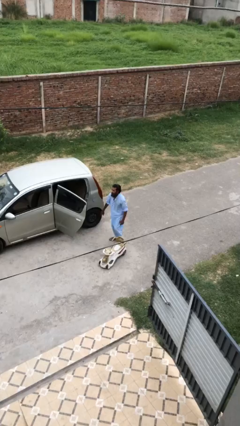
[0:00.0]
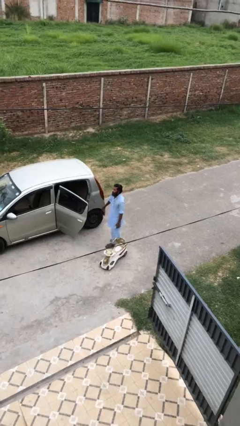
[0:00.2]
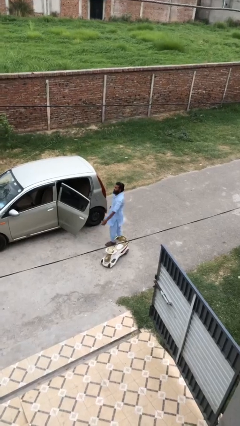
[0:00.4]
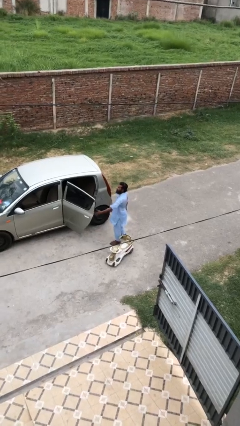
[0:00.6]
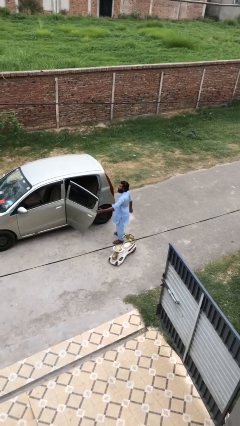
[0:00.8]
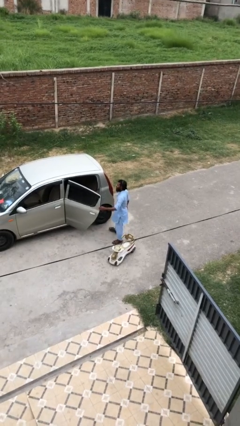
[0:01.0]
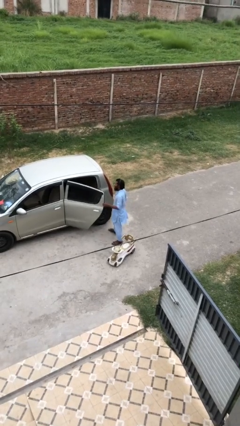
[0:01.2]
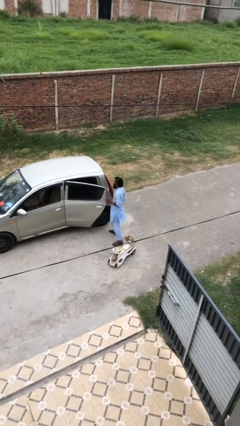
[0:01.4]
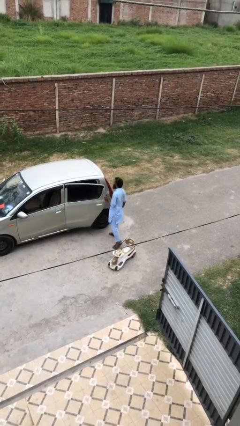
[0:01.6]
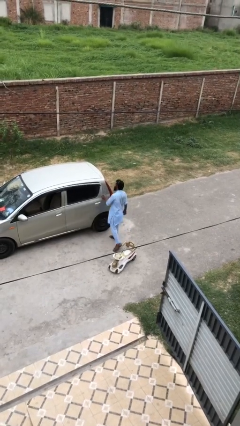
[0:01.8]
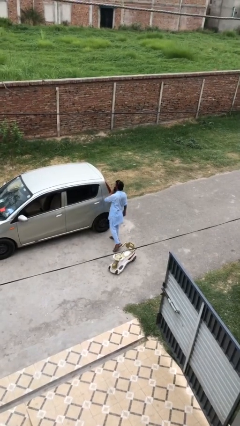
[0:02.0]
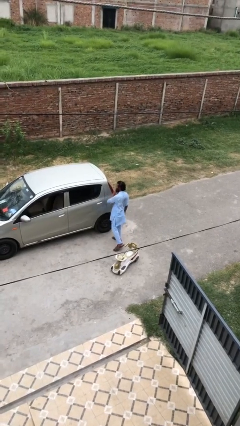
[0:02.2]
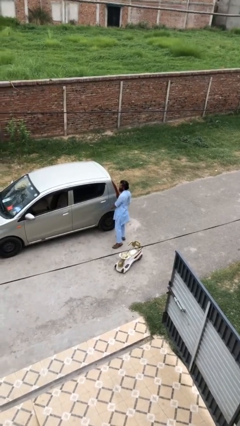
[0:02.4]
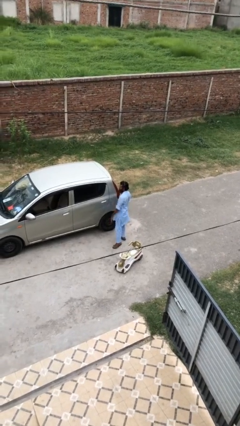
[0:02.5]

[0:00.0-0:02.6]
person closes car door

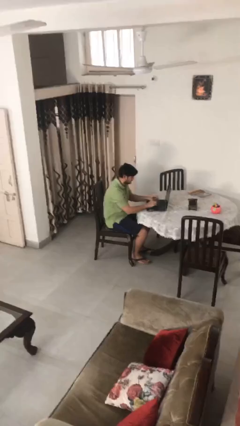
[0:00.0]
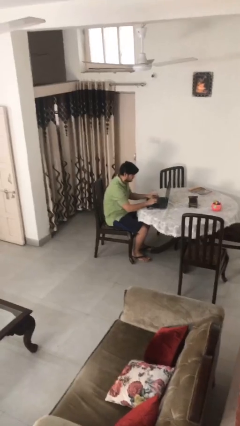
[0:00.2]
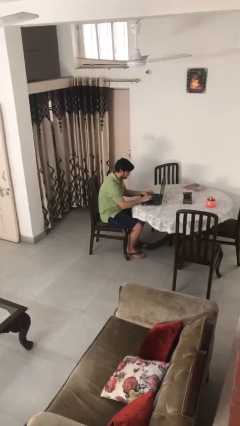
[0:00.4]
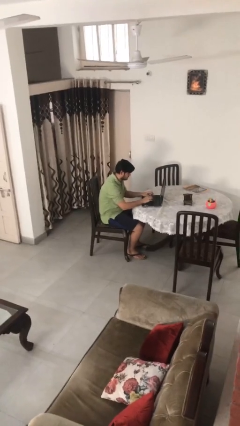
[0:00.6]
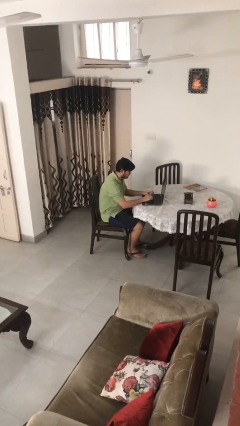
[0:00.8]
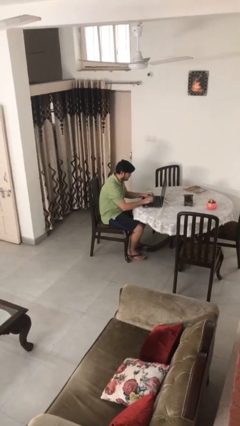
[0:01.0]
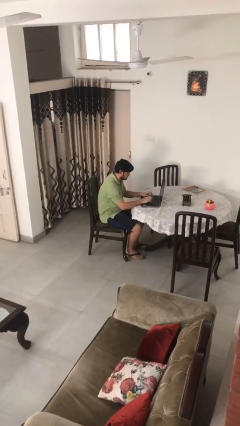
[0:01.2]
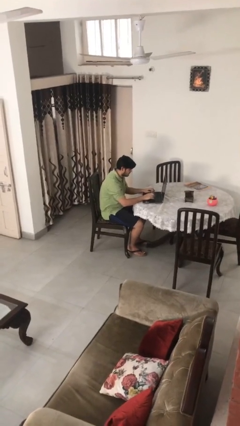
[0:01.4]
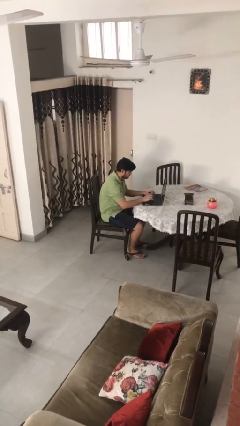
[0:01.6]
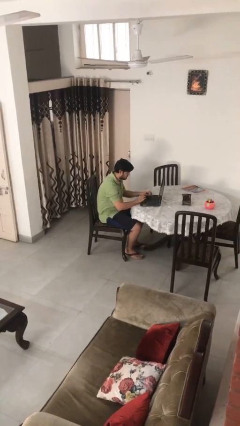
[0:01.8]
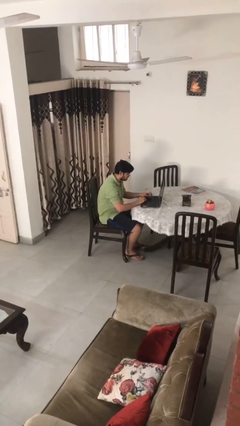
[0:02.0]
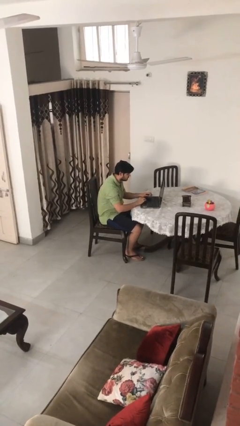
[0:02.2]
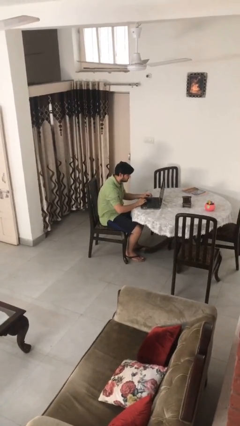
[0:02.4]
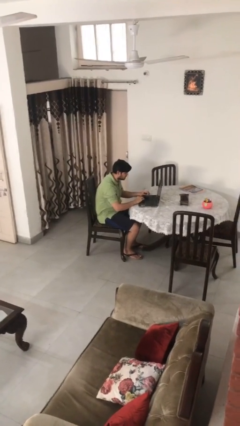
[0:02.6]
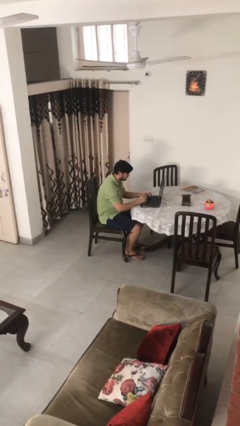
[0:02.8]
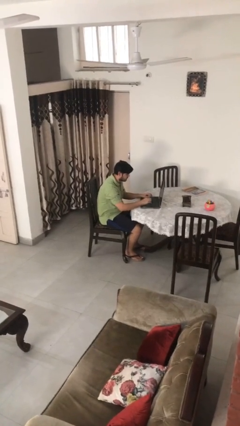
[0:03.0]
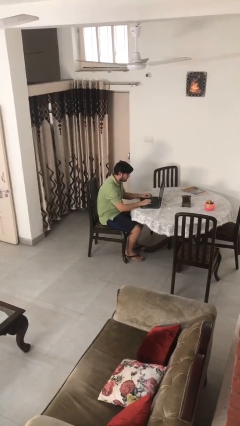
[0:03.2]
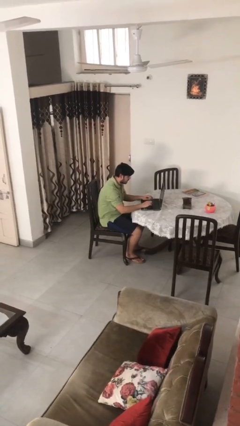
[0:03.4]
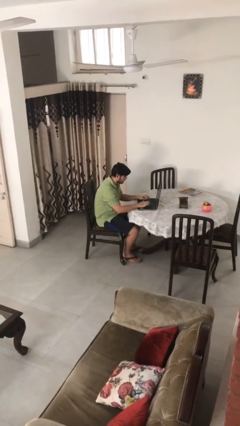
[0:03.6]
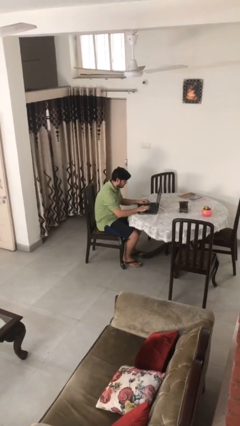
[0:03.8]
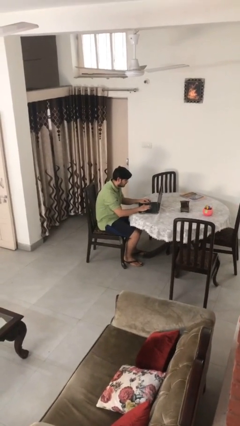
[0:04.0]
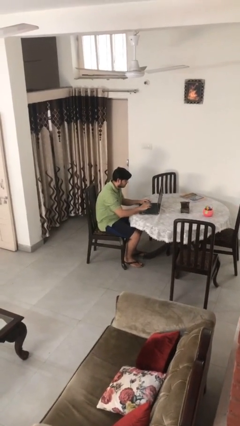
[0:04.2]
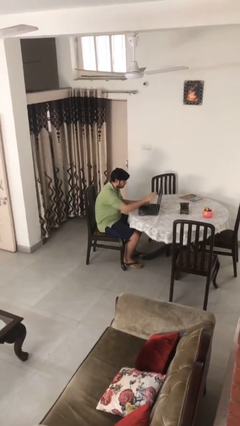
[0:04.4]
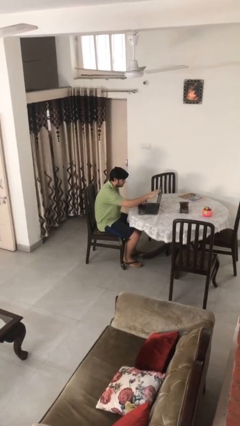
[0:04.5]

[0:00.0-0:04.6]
person interacts with laptop

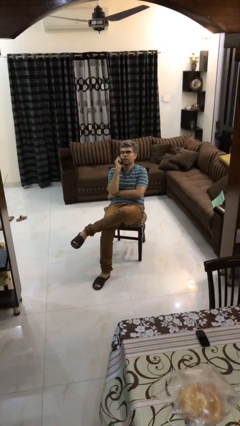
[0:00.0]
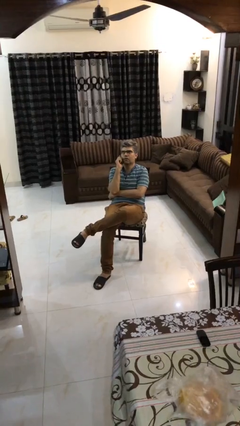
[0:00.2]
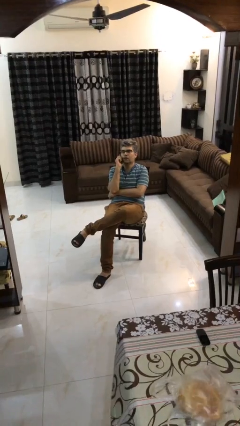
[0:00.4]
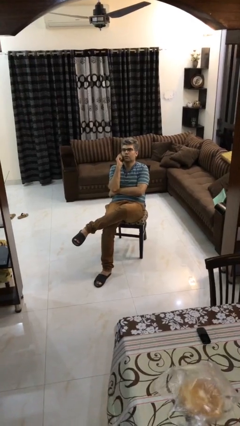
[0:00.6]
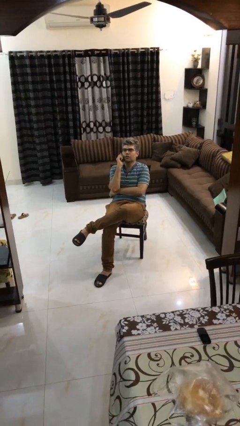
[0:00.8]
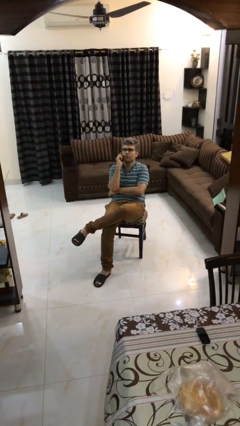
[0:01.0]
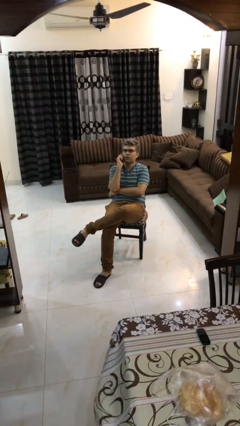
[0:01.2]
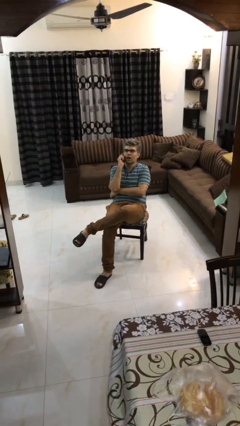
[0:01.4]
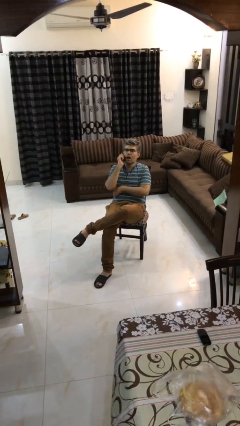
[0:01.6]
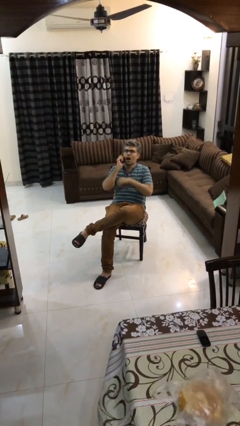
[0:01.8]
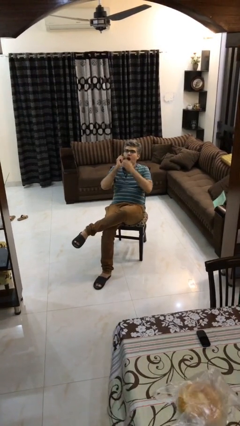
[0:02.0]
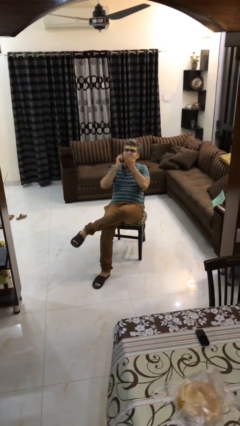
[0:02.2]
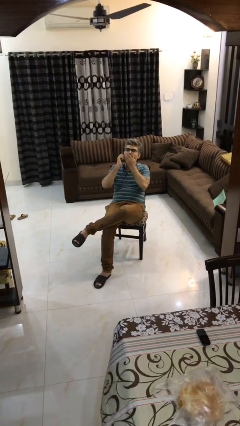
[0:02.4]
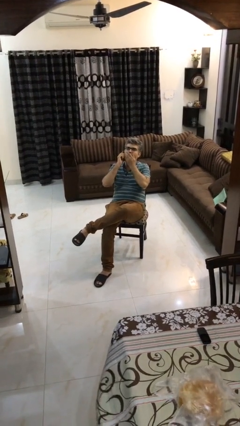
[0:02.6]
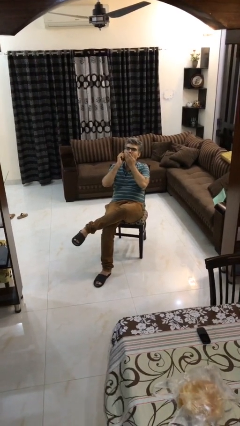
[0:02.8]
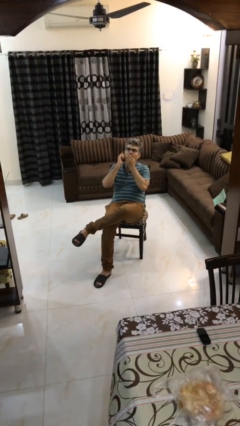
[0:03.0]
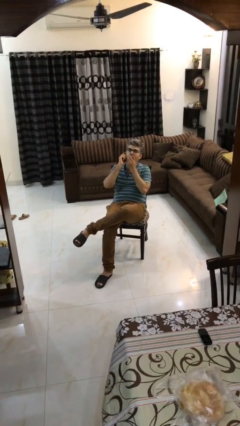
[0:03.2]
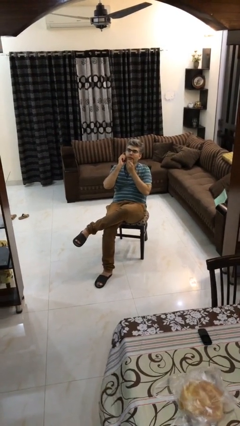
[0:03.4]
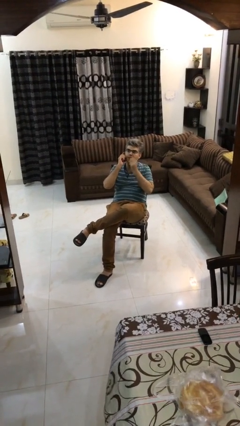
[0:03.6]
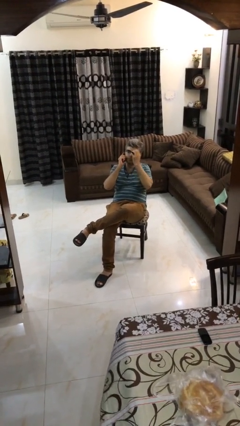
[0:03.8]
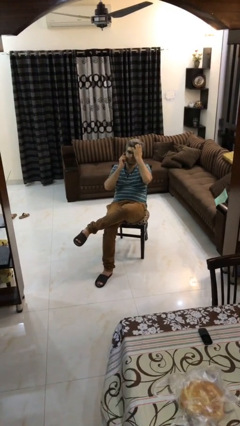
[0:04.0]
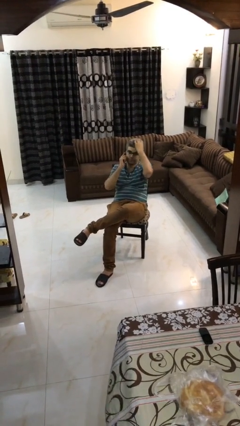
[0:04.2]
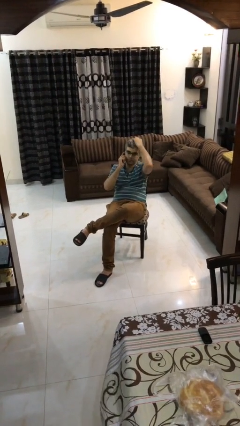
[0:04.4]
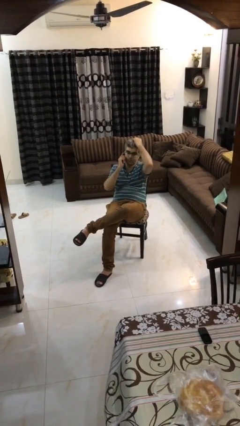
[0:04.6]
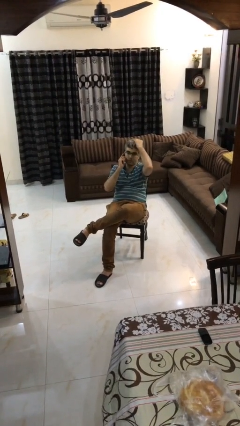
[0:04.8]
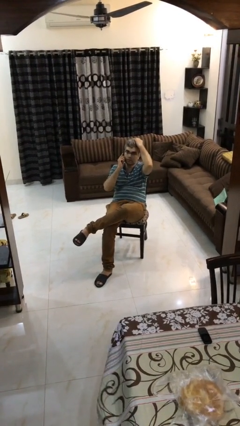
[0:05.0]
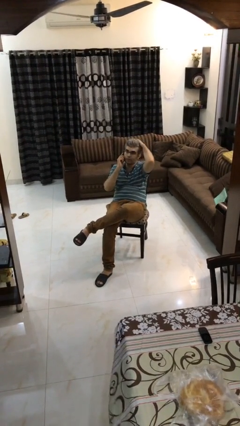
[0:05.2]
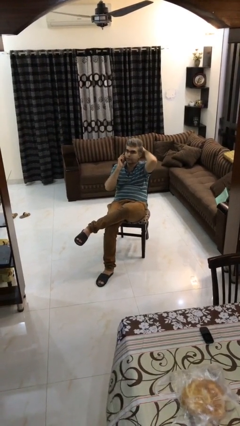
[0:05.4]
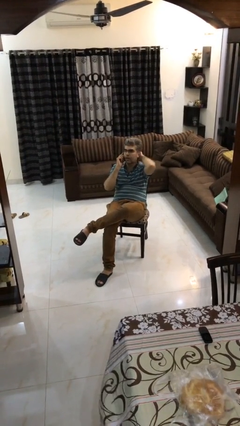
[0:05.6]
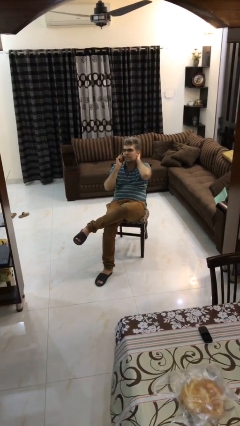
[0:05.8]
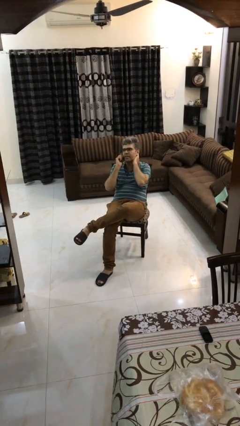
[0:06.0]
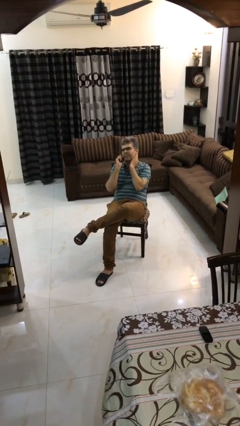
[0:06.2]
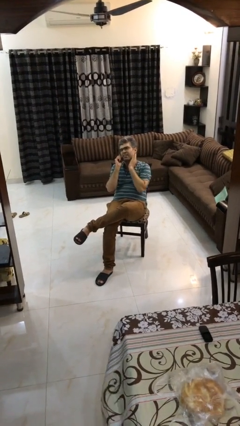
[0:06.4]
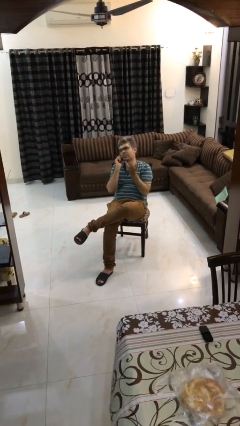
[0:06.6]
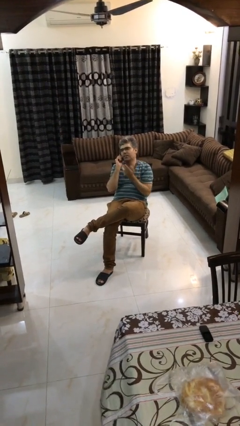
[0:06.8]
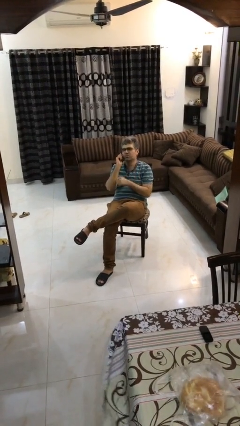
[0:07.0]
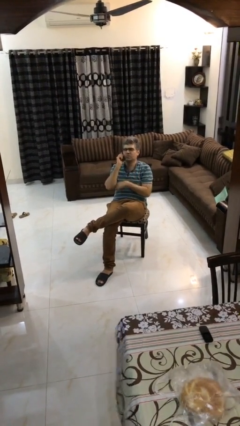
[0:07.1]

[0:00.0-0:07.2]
person talks on phone

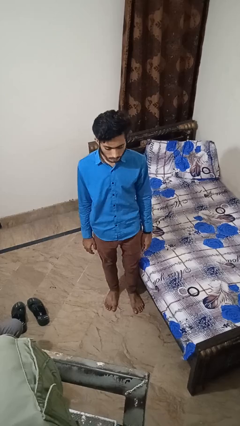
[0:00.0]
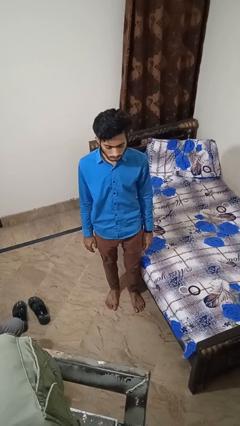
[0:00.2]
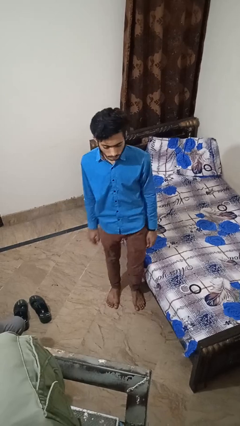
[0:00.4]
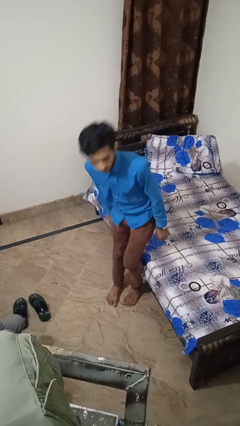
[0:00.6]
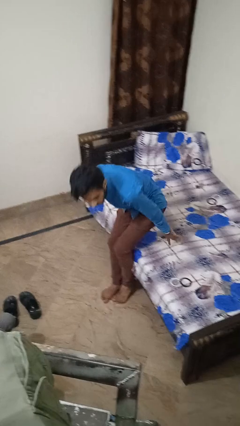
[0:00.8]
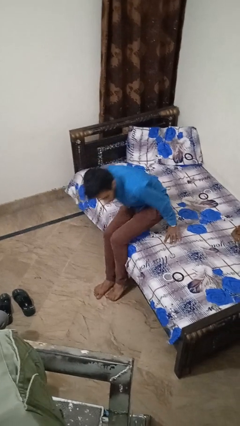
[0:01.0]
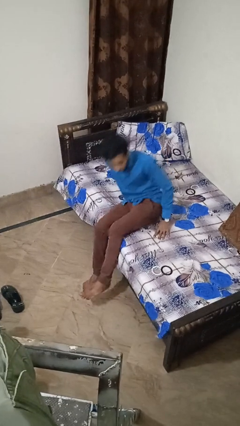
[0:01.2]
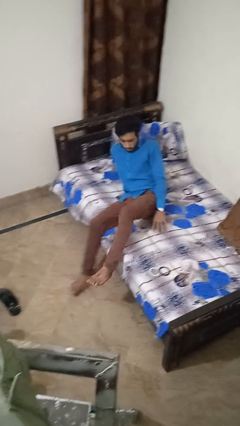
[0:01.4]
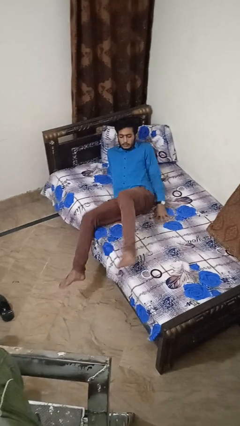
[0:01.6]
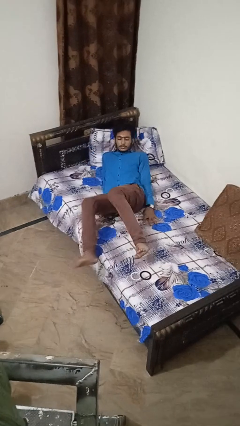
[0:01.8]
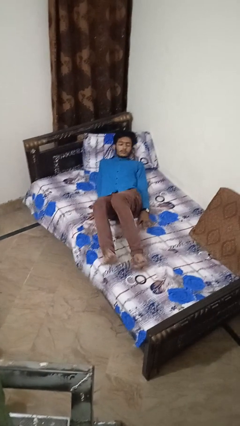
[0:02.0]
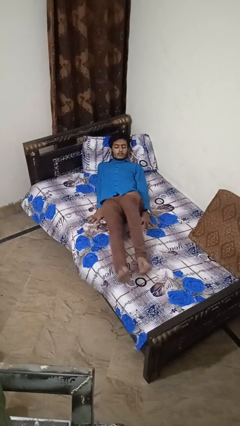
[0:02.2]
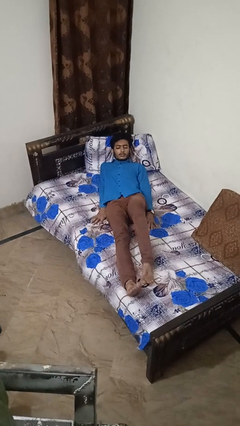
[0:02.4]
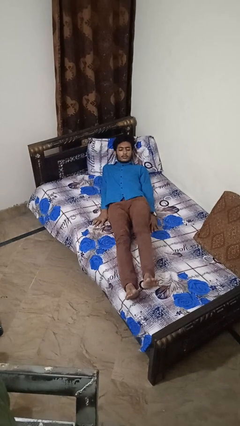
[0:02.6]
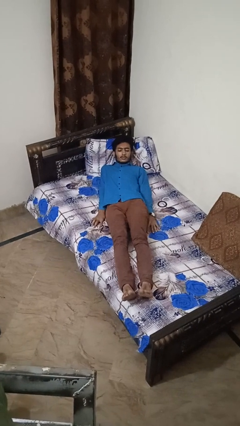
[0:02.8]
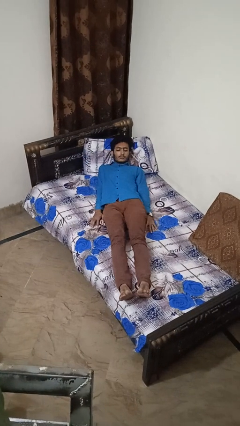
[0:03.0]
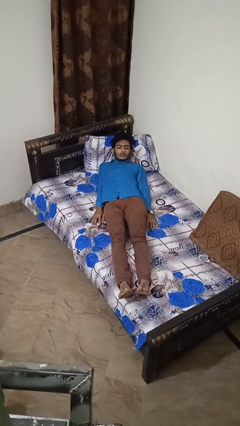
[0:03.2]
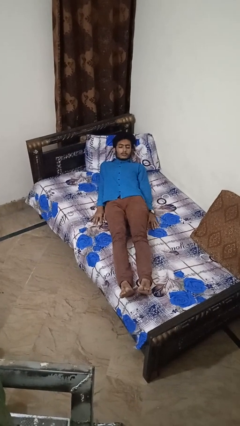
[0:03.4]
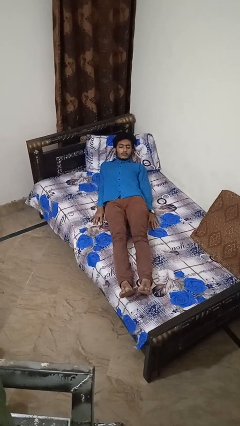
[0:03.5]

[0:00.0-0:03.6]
person lies down on bed
